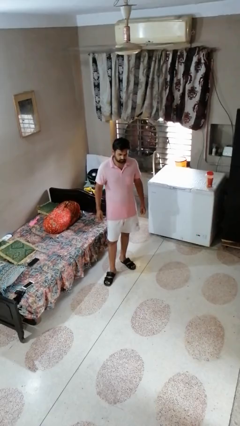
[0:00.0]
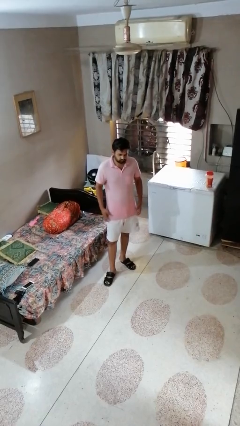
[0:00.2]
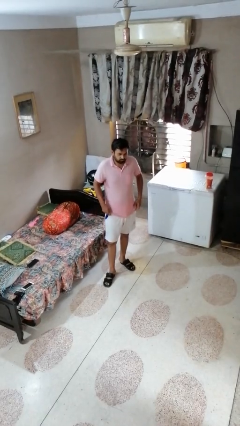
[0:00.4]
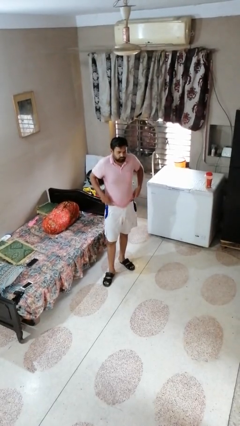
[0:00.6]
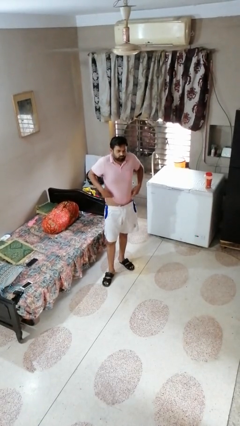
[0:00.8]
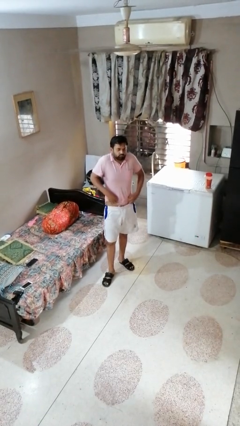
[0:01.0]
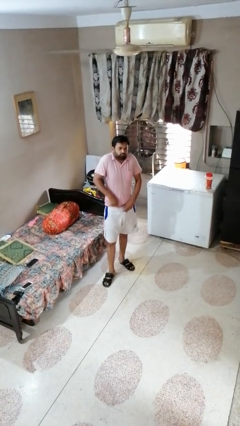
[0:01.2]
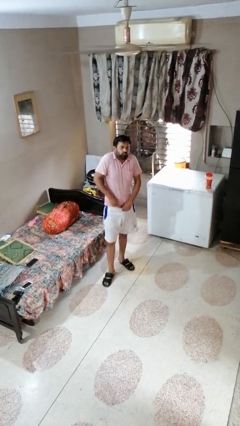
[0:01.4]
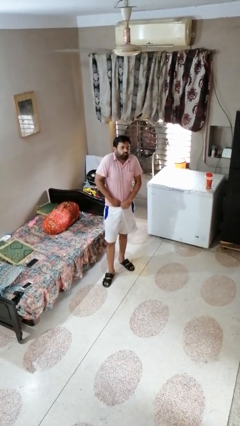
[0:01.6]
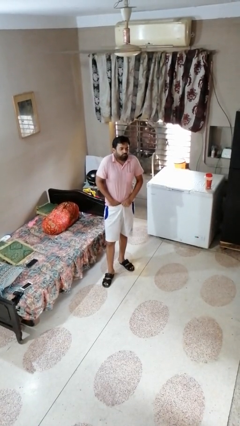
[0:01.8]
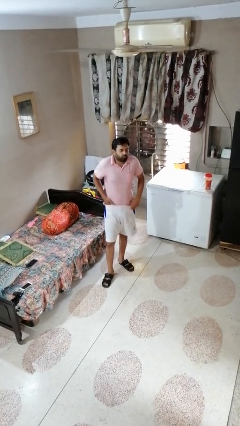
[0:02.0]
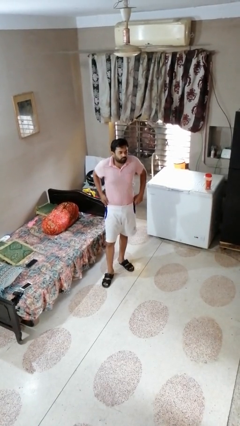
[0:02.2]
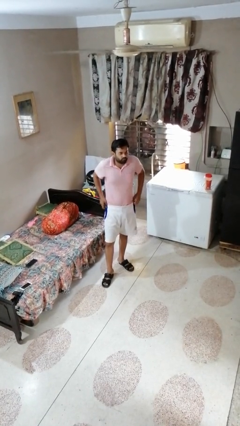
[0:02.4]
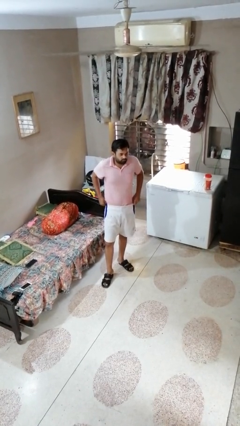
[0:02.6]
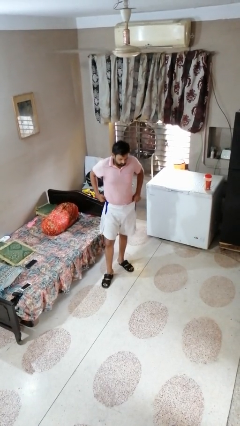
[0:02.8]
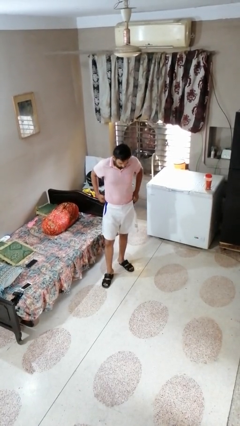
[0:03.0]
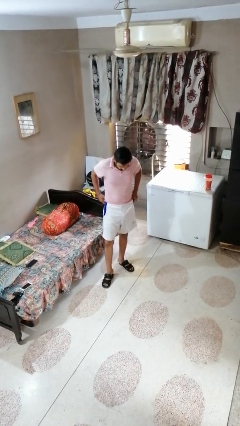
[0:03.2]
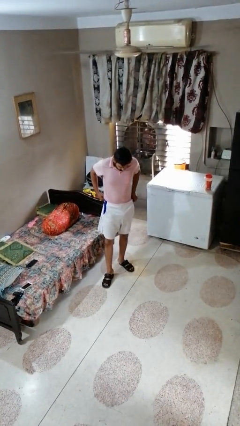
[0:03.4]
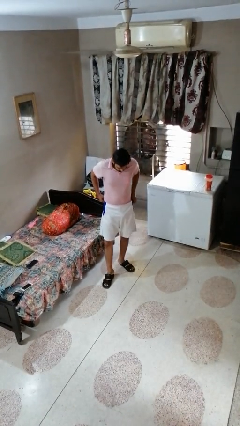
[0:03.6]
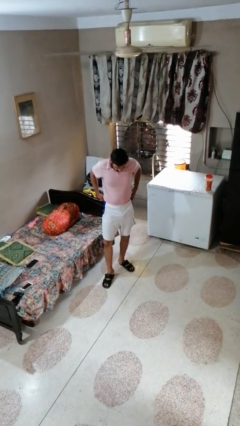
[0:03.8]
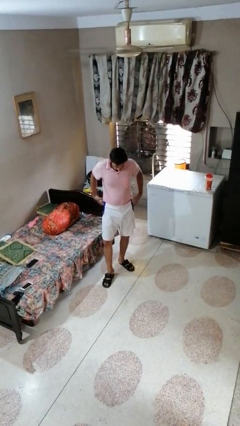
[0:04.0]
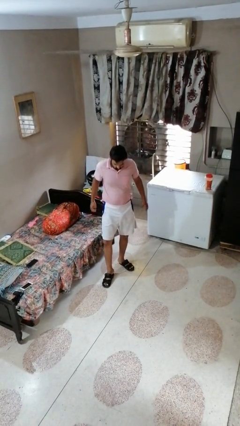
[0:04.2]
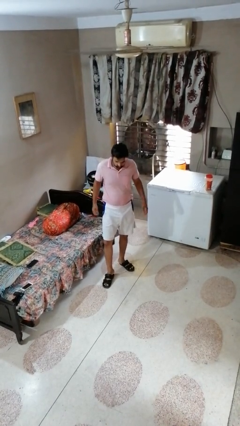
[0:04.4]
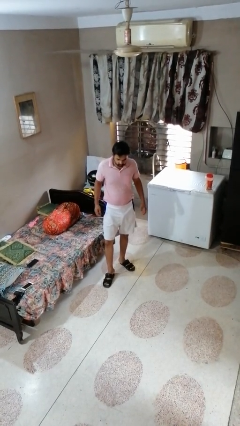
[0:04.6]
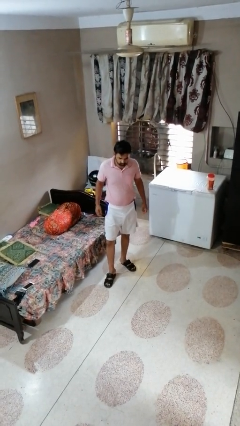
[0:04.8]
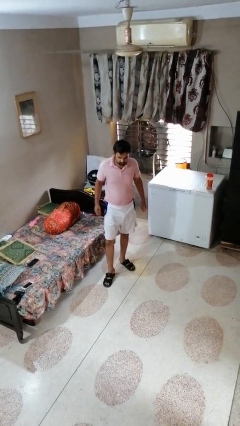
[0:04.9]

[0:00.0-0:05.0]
person tucks in shirt

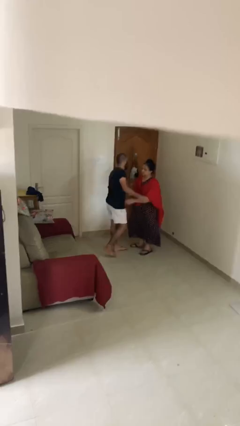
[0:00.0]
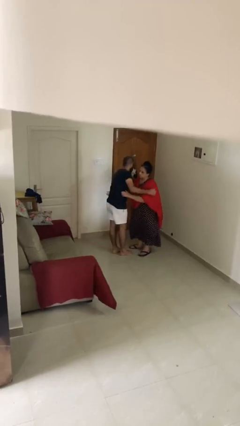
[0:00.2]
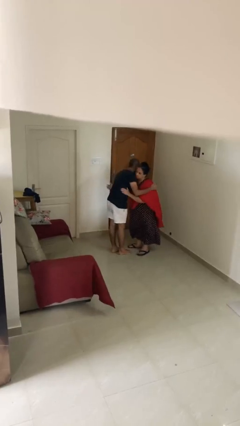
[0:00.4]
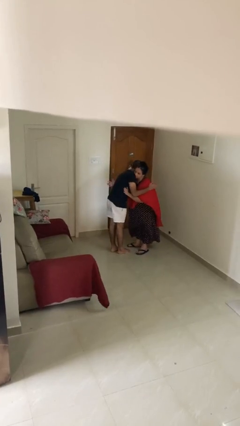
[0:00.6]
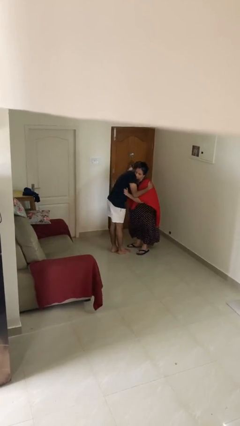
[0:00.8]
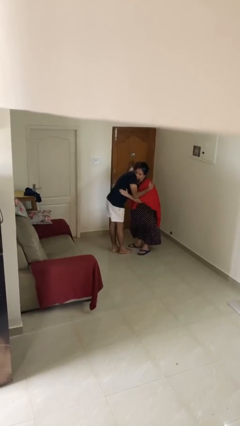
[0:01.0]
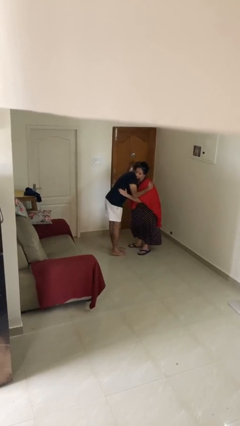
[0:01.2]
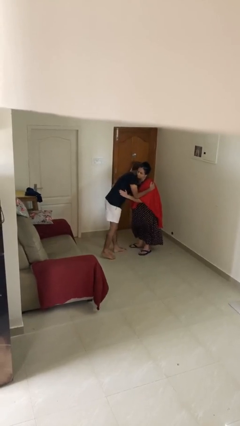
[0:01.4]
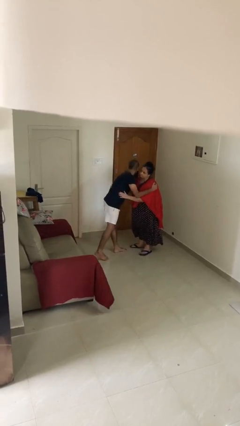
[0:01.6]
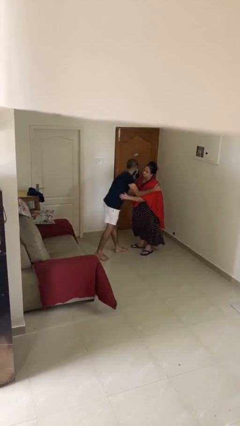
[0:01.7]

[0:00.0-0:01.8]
person embraces person

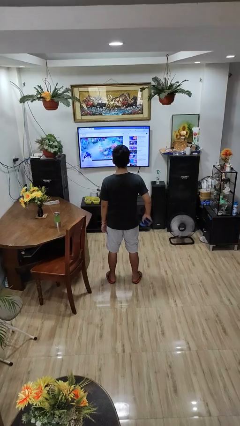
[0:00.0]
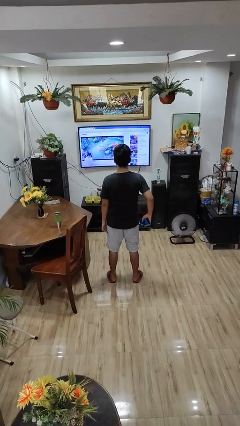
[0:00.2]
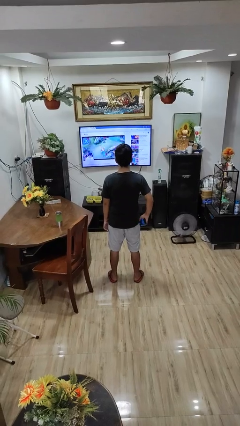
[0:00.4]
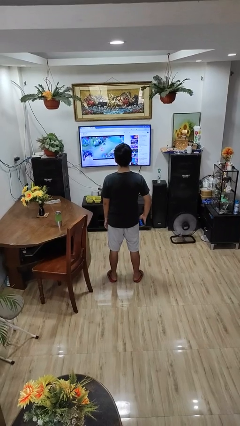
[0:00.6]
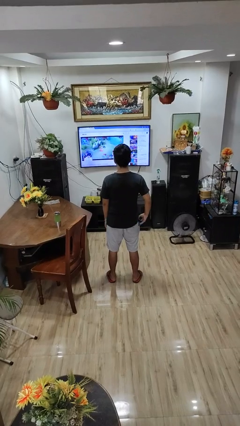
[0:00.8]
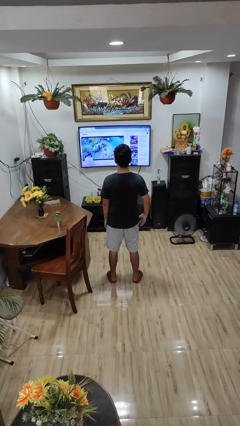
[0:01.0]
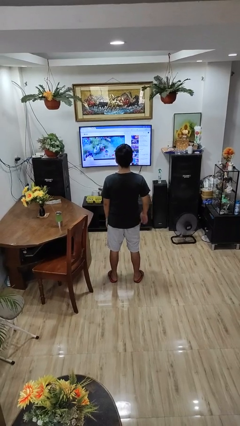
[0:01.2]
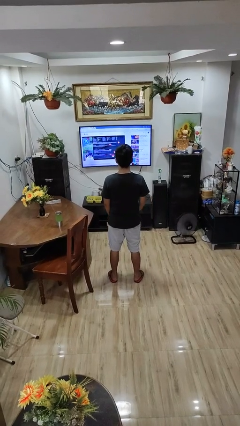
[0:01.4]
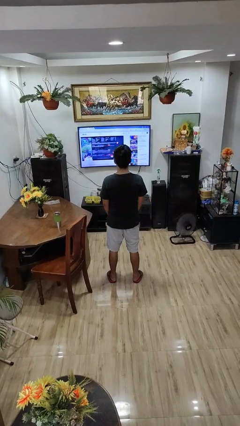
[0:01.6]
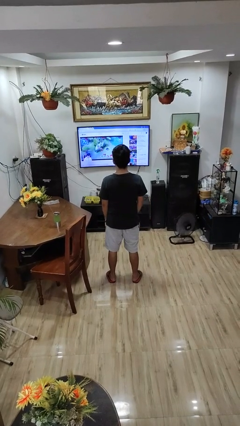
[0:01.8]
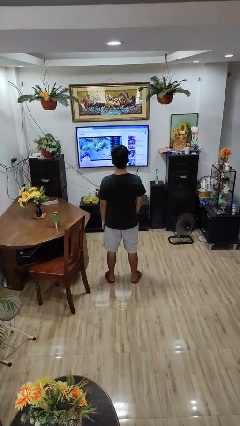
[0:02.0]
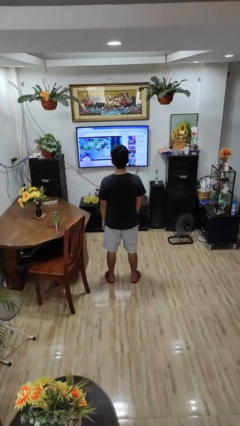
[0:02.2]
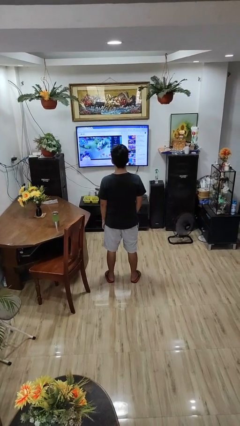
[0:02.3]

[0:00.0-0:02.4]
person puts phone into pocket

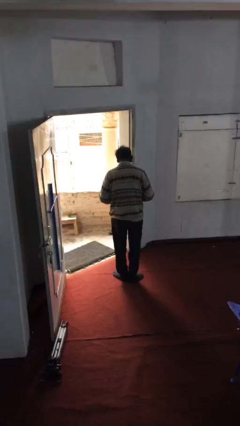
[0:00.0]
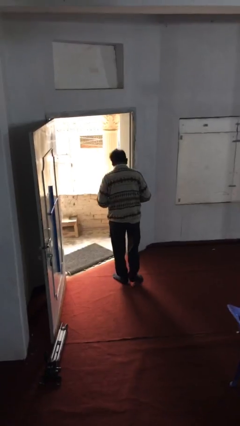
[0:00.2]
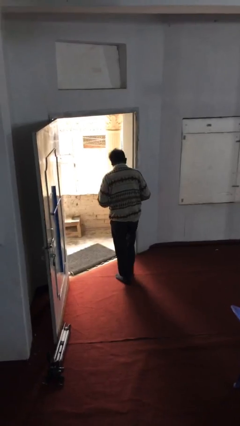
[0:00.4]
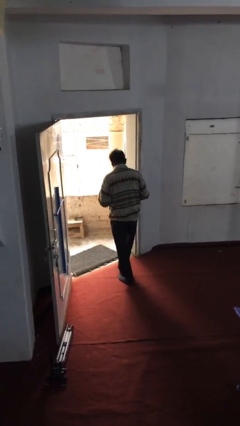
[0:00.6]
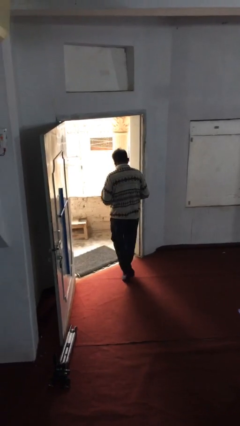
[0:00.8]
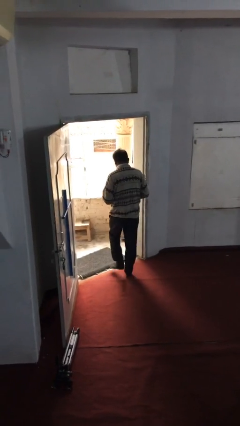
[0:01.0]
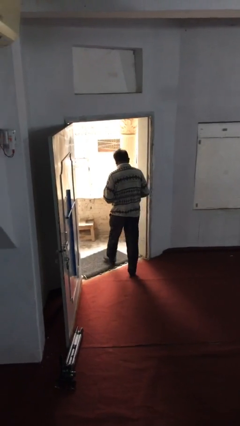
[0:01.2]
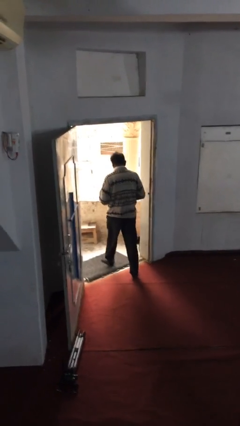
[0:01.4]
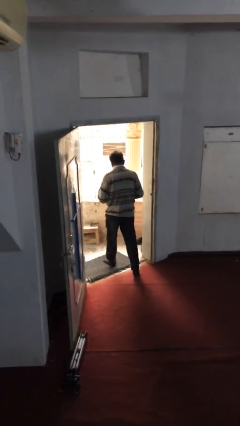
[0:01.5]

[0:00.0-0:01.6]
person exits scene through structure

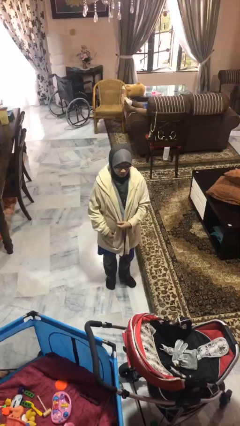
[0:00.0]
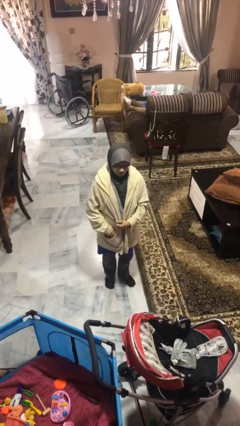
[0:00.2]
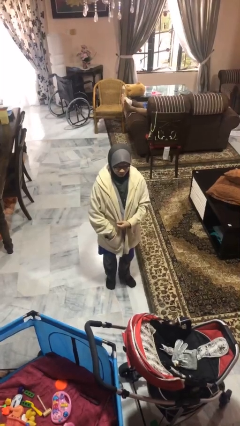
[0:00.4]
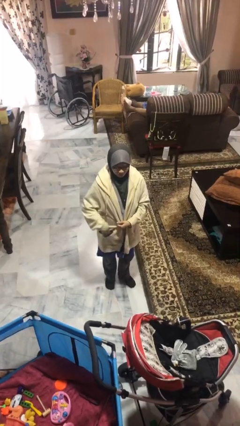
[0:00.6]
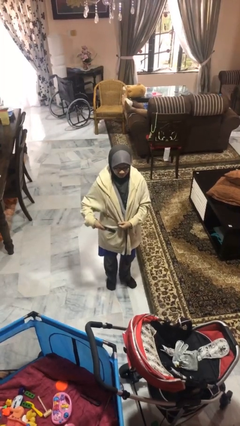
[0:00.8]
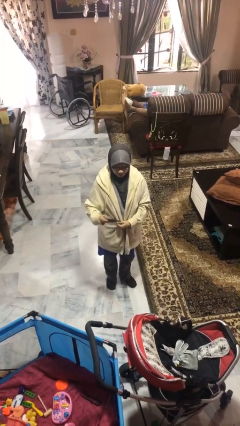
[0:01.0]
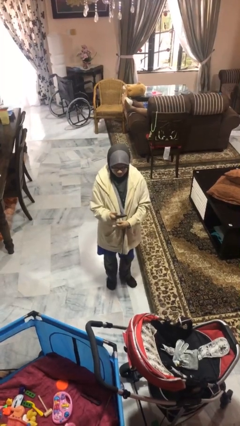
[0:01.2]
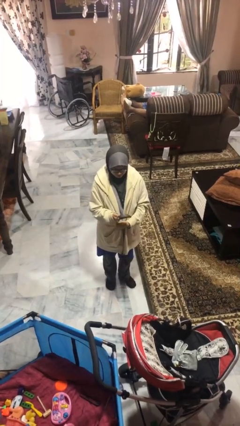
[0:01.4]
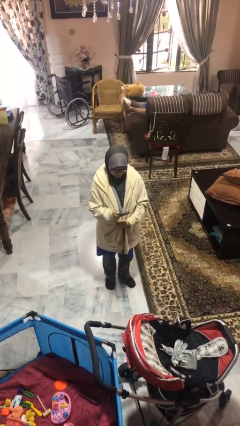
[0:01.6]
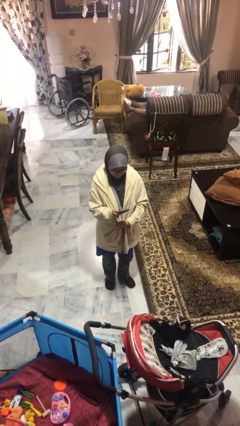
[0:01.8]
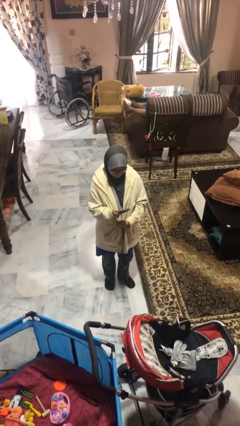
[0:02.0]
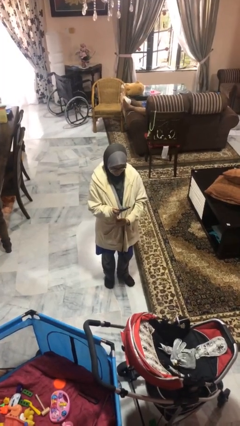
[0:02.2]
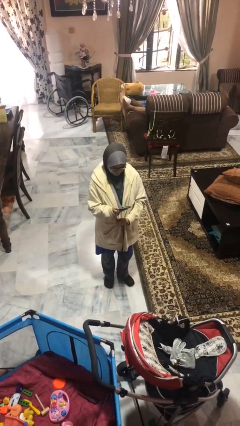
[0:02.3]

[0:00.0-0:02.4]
person takes phone from pocket

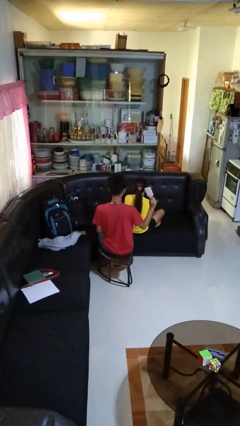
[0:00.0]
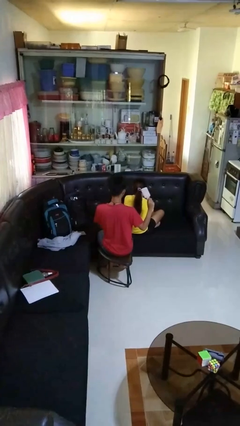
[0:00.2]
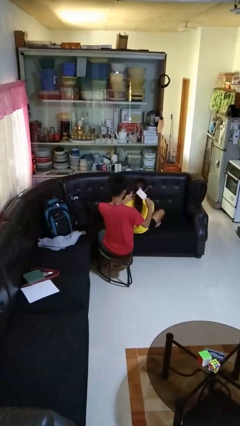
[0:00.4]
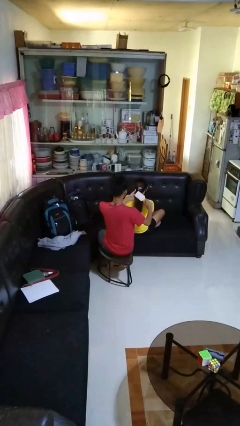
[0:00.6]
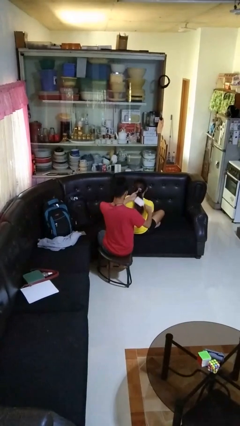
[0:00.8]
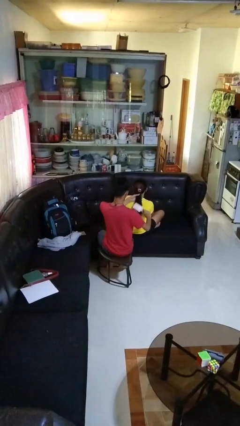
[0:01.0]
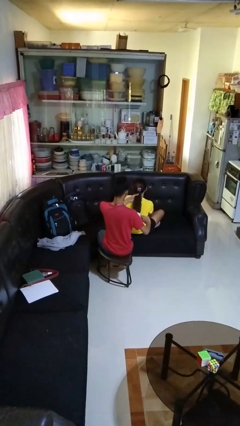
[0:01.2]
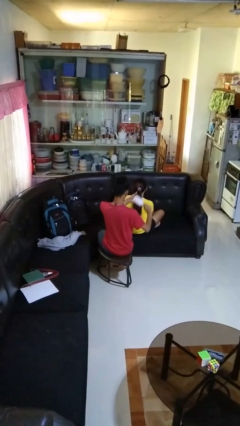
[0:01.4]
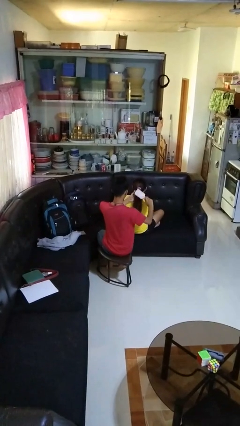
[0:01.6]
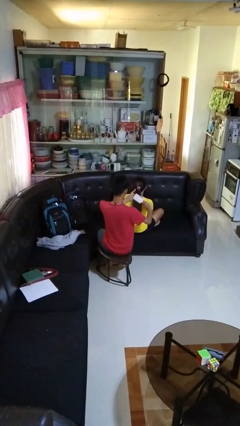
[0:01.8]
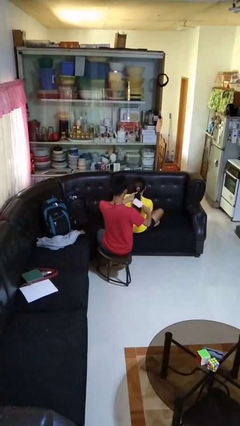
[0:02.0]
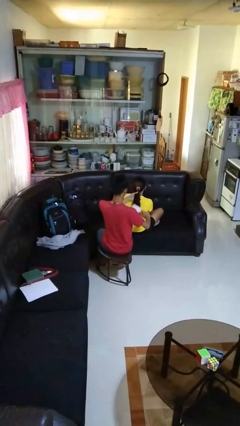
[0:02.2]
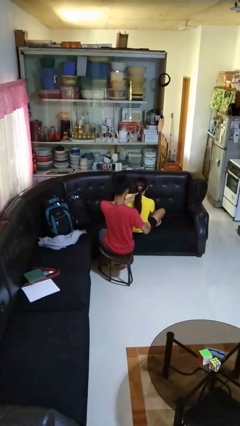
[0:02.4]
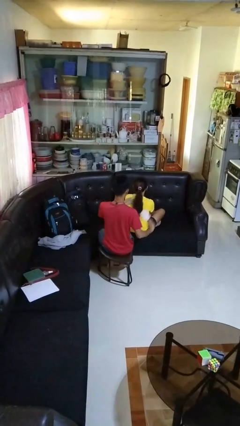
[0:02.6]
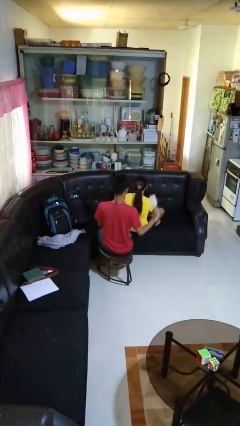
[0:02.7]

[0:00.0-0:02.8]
person brushes hair of person

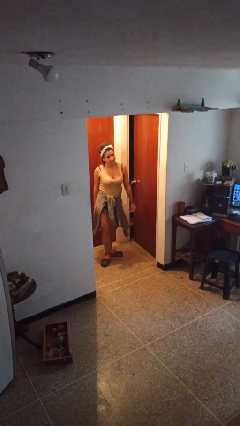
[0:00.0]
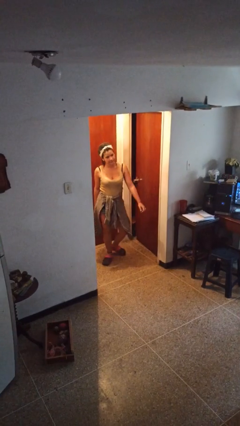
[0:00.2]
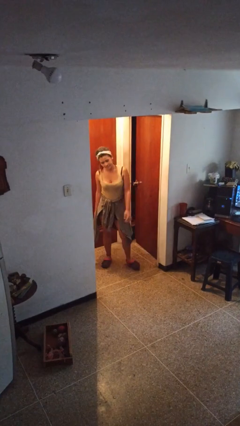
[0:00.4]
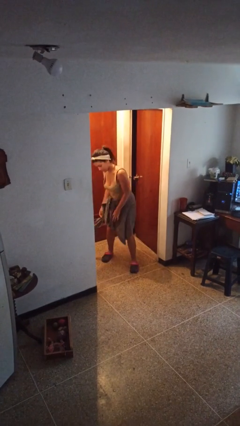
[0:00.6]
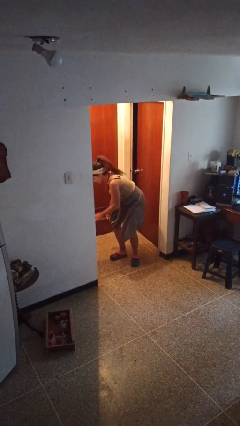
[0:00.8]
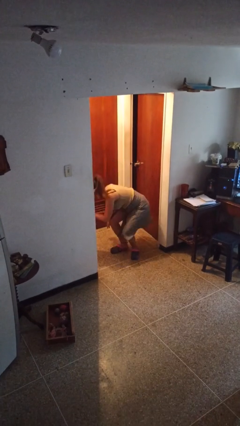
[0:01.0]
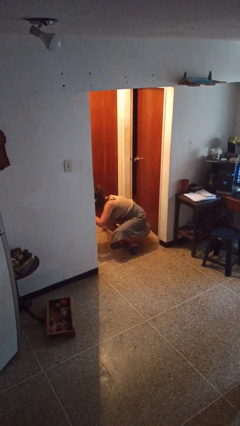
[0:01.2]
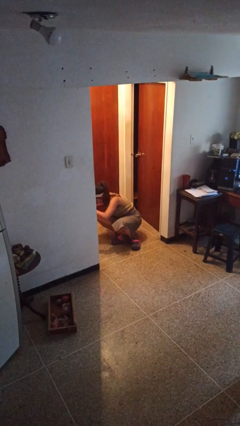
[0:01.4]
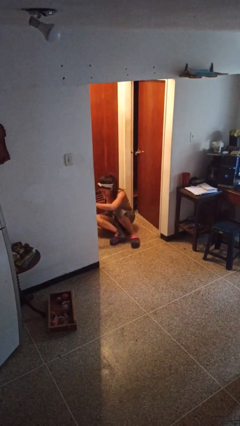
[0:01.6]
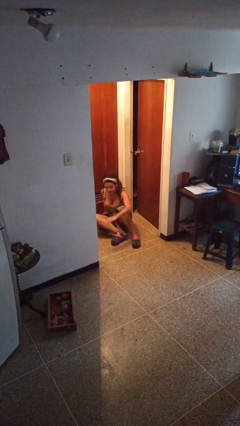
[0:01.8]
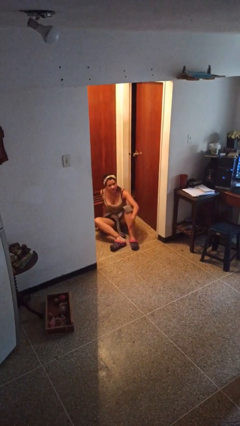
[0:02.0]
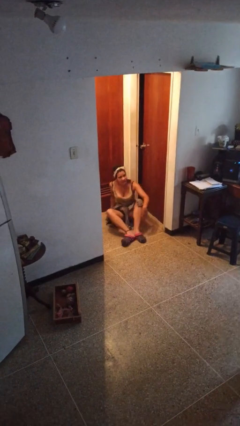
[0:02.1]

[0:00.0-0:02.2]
person sits down
